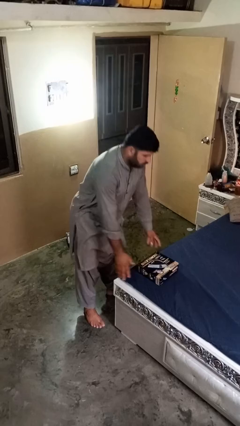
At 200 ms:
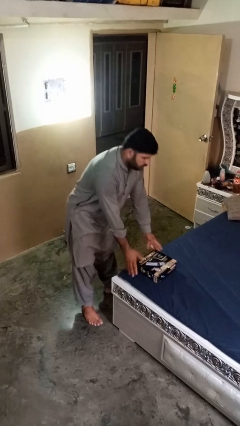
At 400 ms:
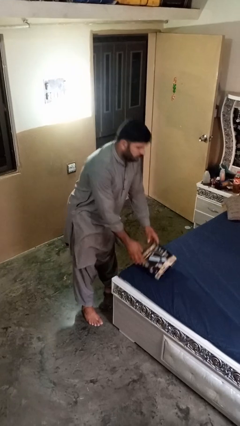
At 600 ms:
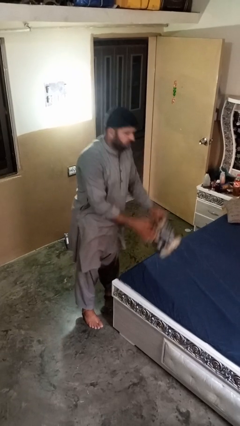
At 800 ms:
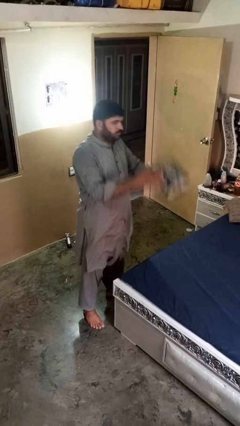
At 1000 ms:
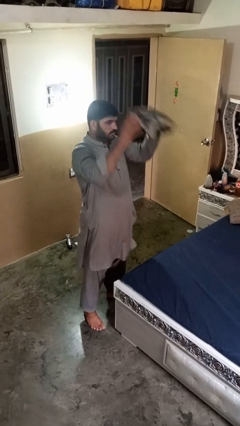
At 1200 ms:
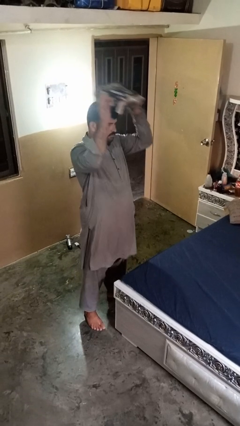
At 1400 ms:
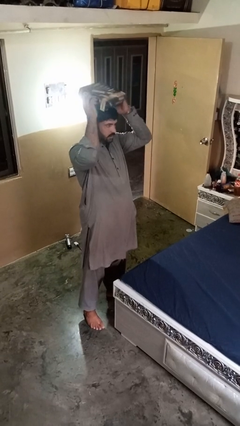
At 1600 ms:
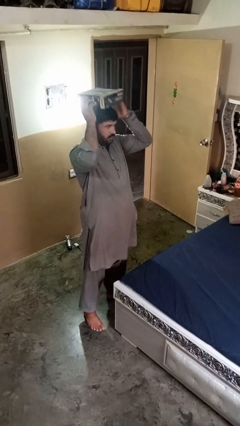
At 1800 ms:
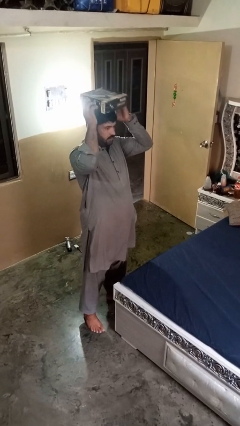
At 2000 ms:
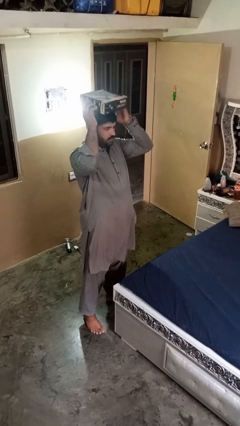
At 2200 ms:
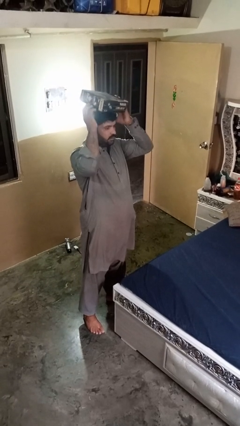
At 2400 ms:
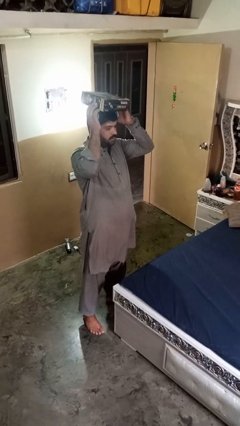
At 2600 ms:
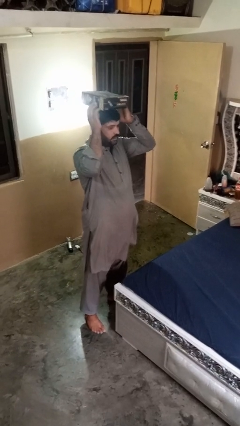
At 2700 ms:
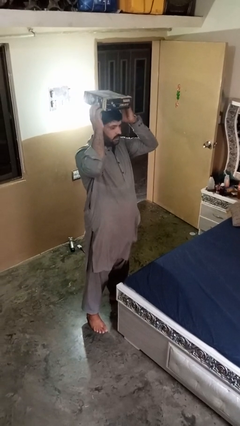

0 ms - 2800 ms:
person holds object above head

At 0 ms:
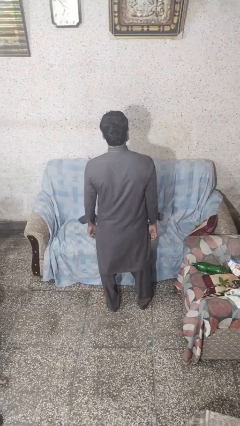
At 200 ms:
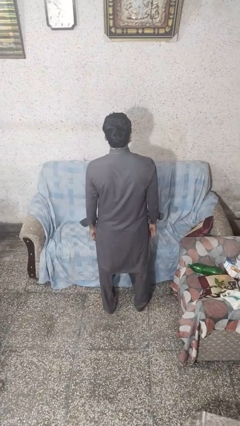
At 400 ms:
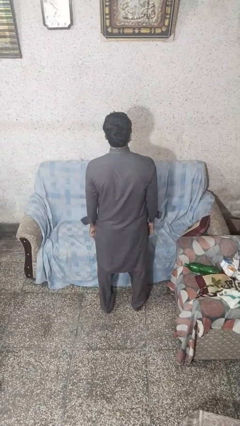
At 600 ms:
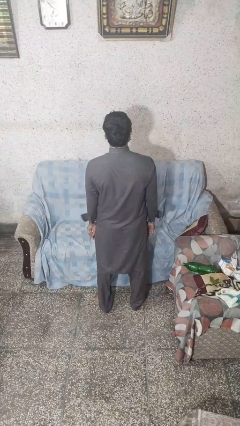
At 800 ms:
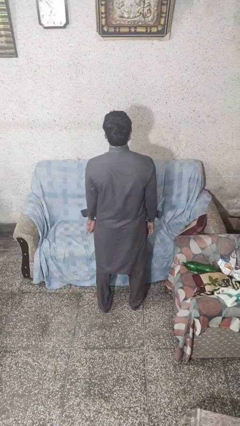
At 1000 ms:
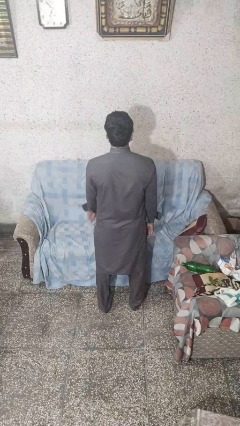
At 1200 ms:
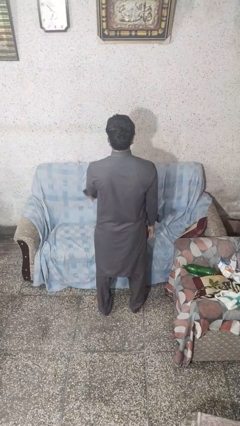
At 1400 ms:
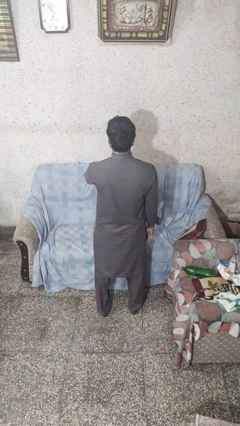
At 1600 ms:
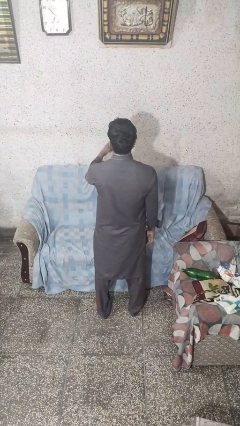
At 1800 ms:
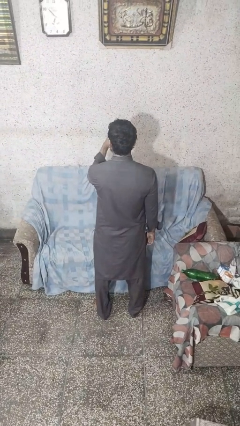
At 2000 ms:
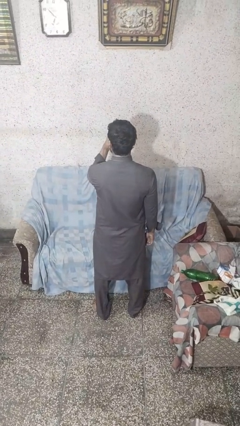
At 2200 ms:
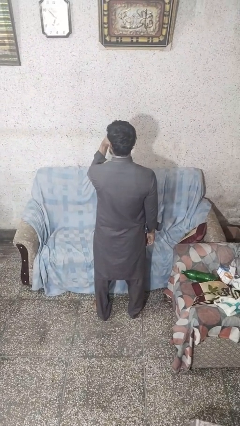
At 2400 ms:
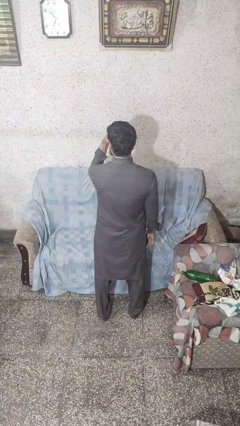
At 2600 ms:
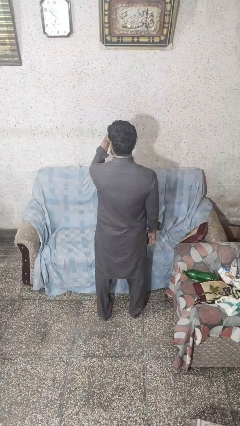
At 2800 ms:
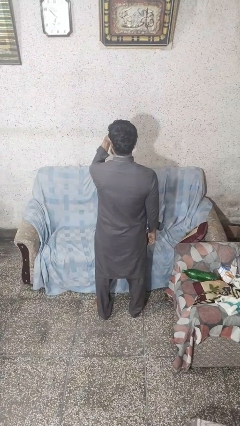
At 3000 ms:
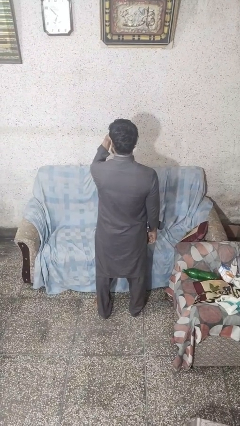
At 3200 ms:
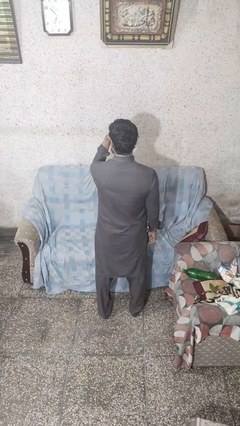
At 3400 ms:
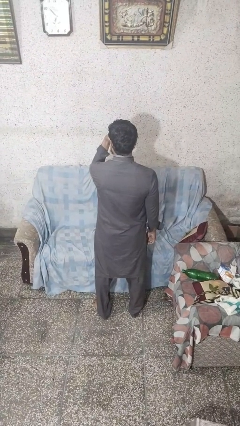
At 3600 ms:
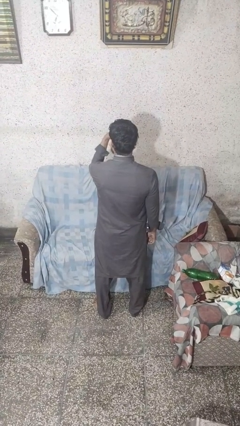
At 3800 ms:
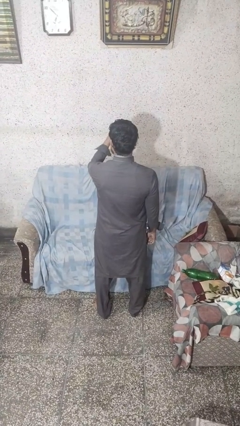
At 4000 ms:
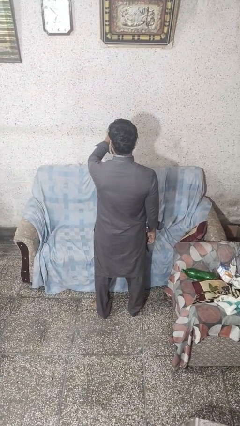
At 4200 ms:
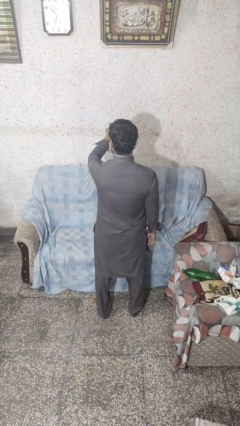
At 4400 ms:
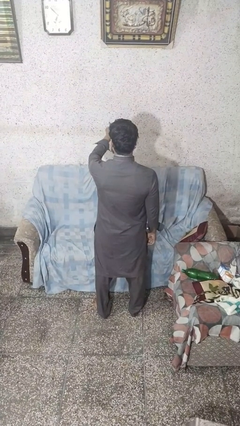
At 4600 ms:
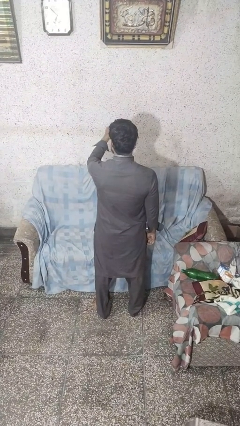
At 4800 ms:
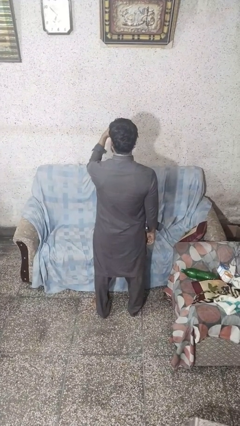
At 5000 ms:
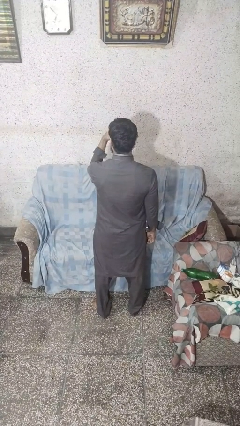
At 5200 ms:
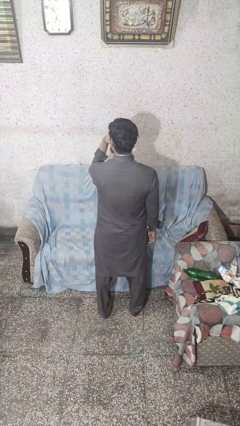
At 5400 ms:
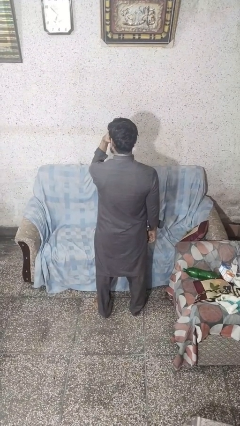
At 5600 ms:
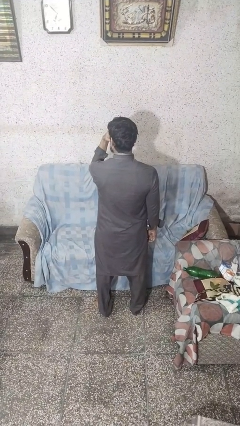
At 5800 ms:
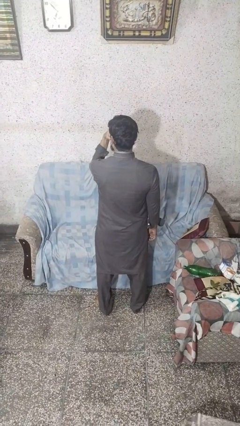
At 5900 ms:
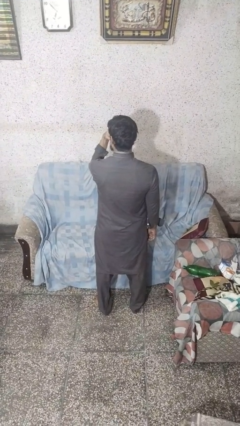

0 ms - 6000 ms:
person gestures watch closely

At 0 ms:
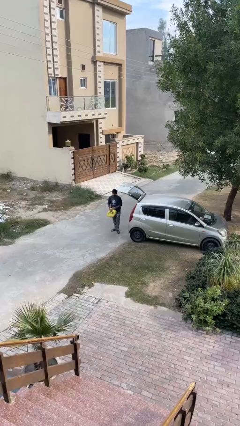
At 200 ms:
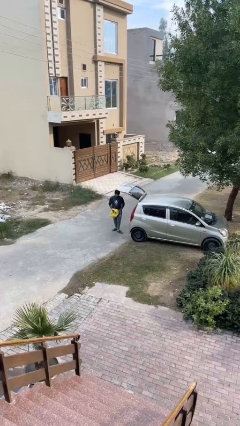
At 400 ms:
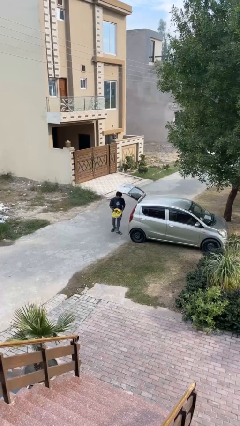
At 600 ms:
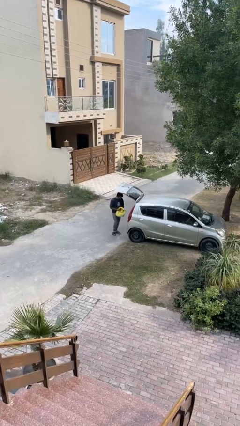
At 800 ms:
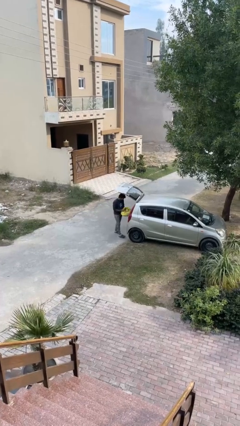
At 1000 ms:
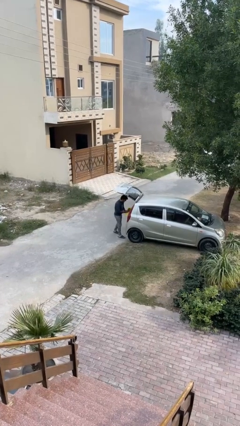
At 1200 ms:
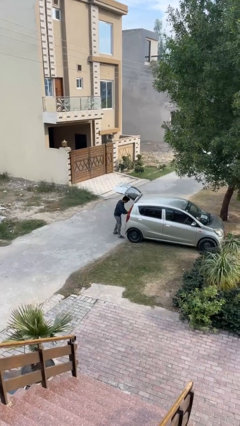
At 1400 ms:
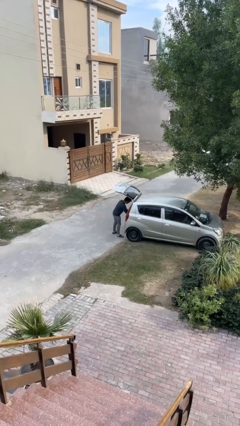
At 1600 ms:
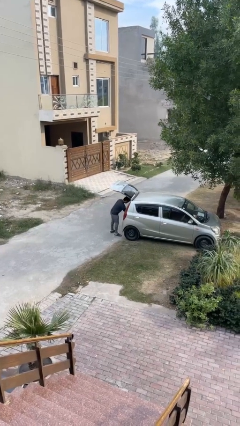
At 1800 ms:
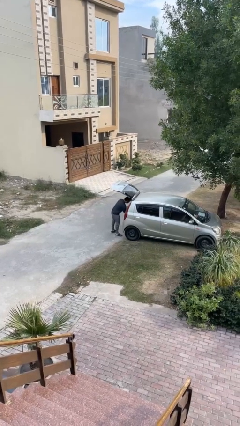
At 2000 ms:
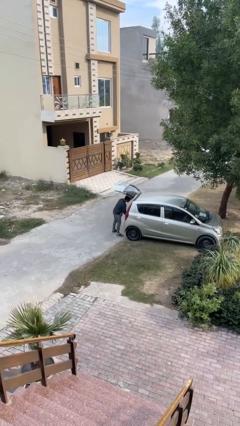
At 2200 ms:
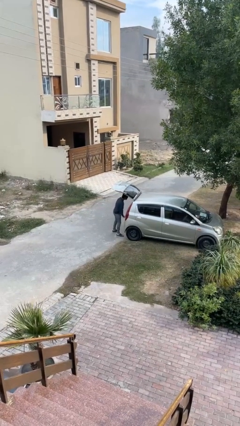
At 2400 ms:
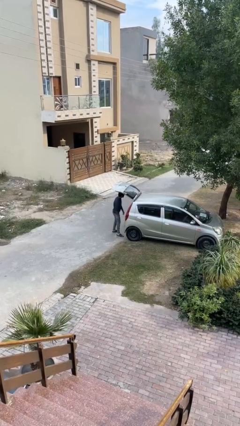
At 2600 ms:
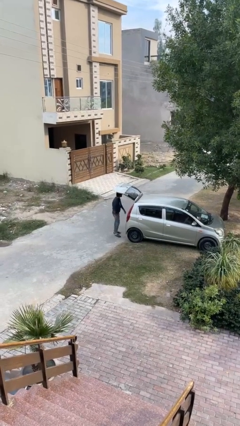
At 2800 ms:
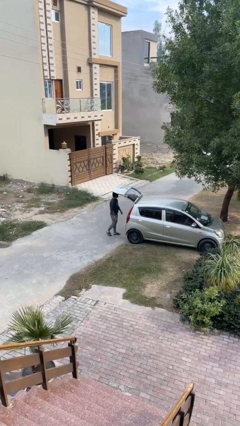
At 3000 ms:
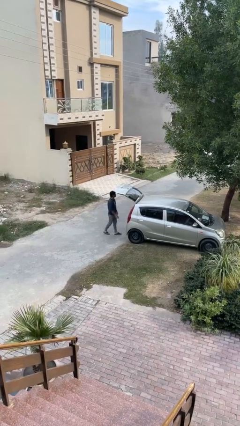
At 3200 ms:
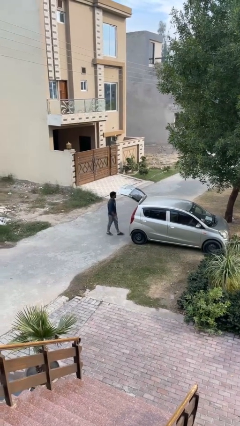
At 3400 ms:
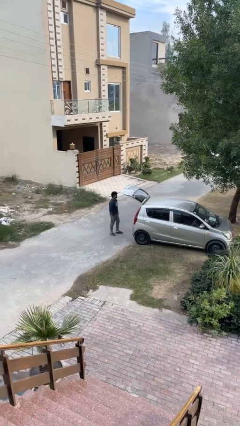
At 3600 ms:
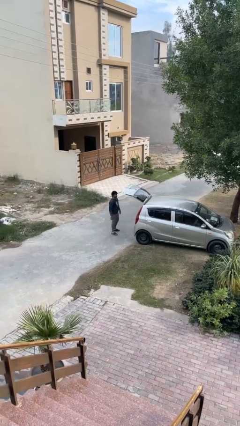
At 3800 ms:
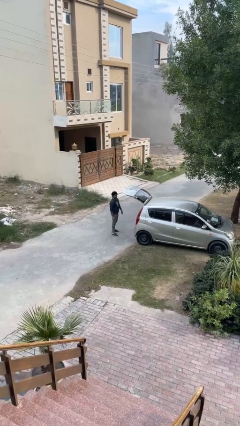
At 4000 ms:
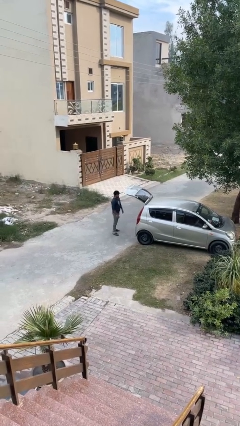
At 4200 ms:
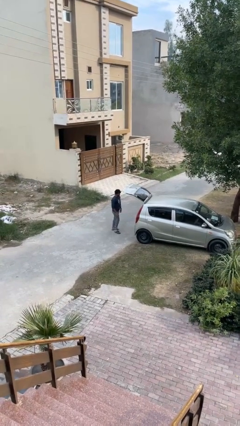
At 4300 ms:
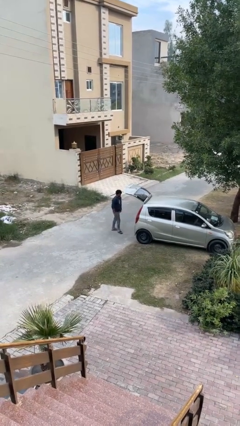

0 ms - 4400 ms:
person loads car

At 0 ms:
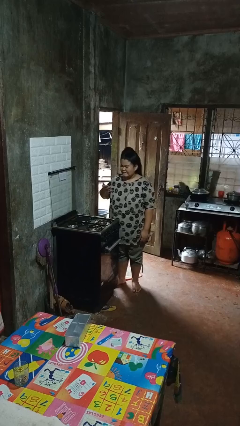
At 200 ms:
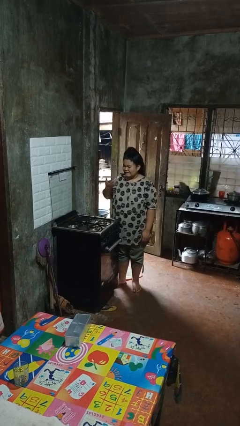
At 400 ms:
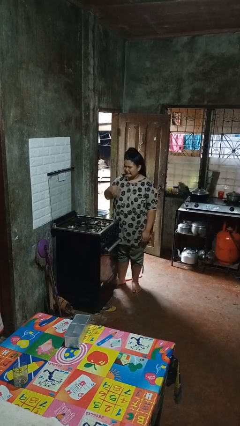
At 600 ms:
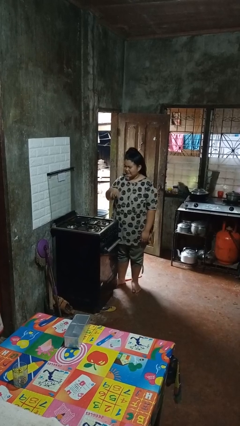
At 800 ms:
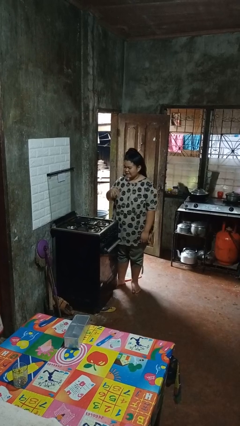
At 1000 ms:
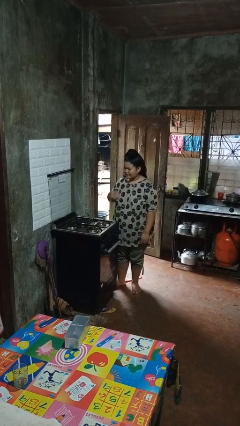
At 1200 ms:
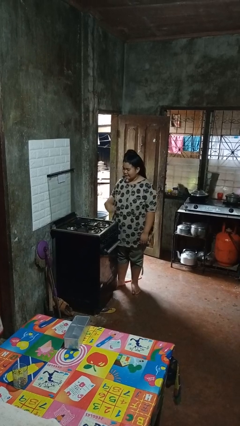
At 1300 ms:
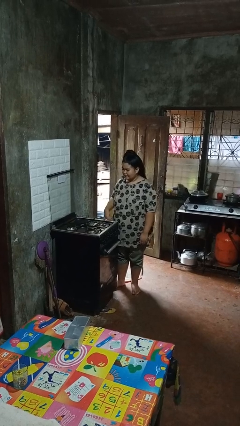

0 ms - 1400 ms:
person burns hand

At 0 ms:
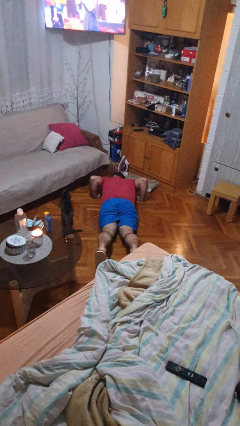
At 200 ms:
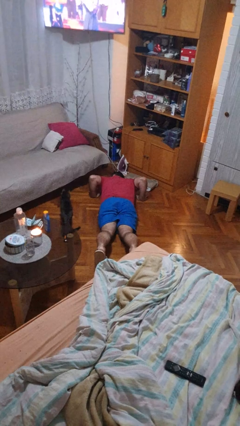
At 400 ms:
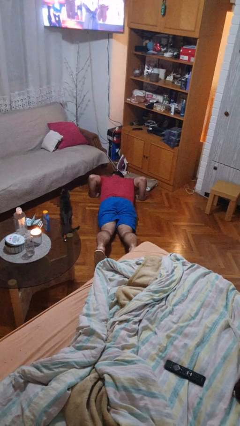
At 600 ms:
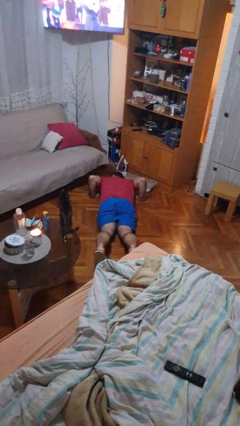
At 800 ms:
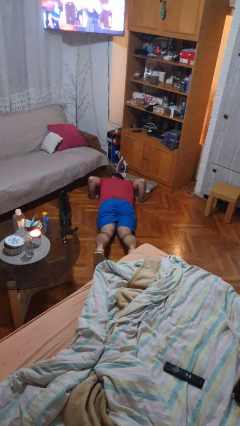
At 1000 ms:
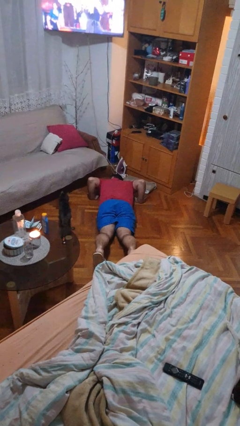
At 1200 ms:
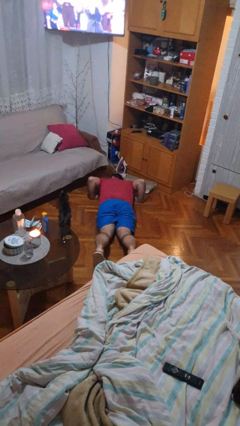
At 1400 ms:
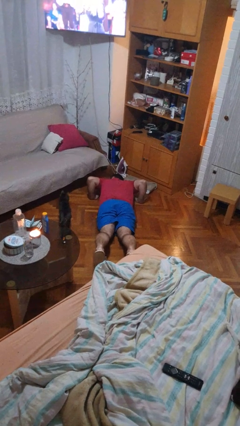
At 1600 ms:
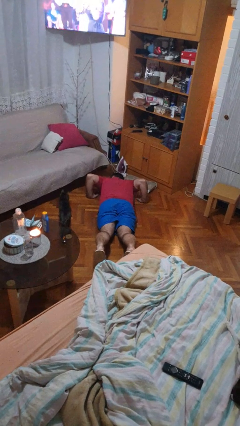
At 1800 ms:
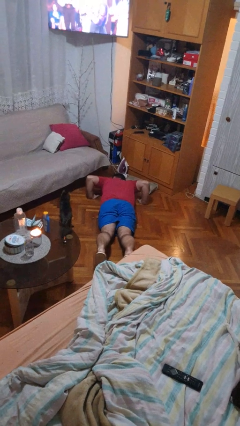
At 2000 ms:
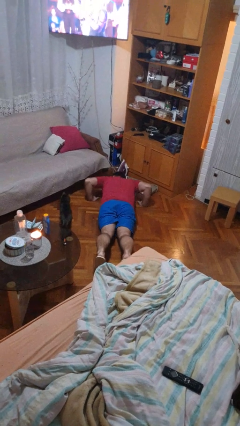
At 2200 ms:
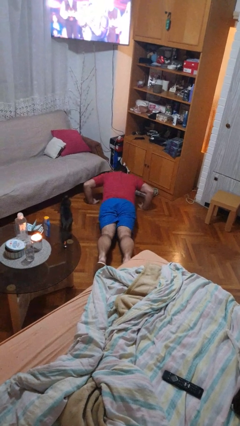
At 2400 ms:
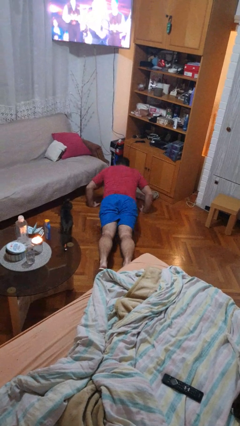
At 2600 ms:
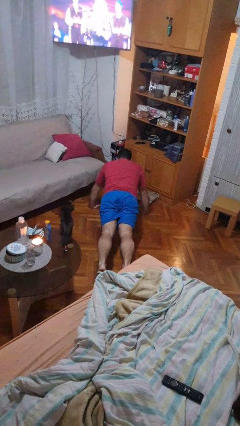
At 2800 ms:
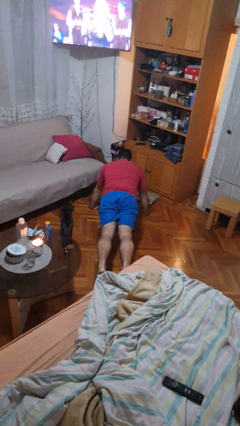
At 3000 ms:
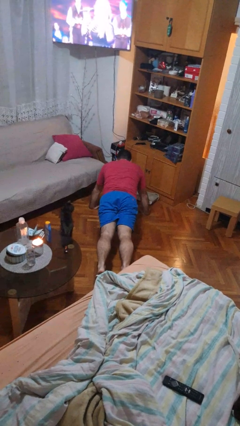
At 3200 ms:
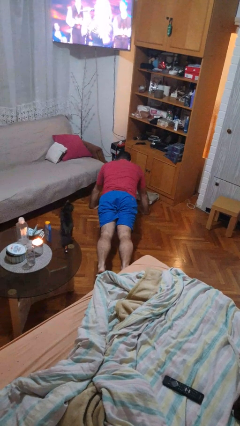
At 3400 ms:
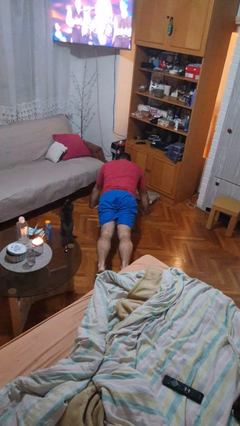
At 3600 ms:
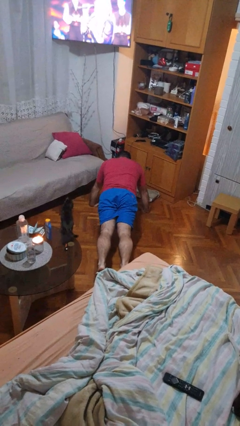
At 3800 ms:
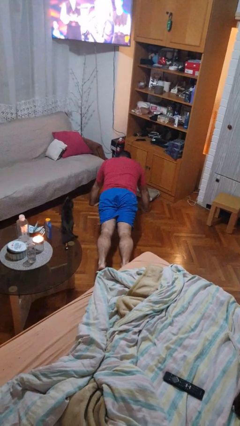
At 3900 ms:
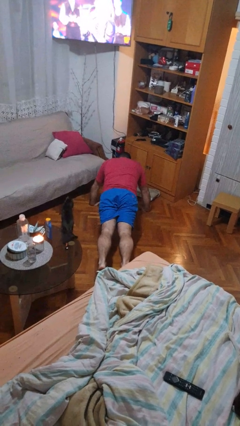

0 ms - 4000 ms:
person exercises with pushup
